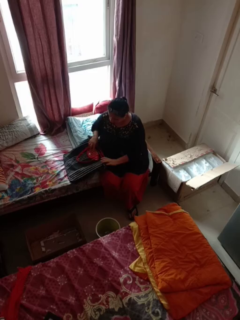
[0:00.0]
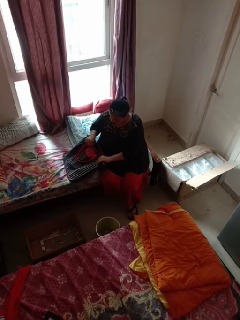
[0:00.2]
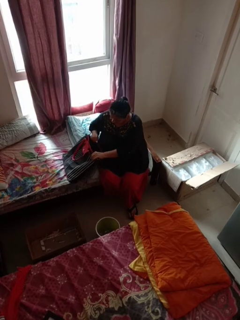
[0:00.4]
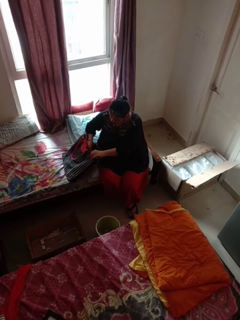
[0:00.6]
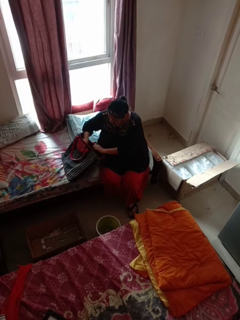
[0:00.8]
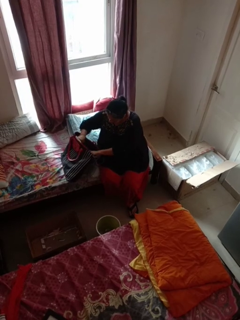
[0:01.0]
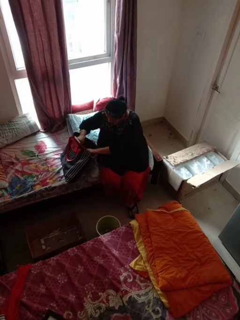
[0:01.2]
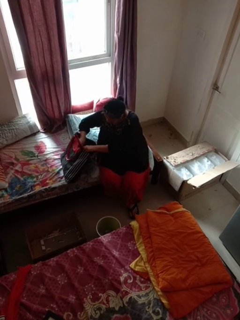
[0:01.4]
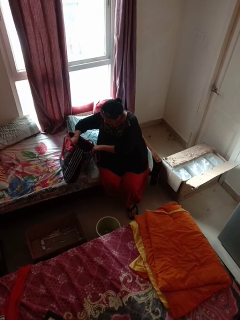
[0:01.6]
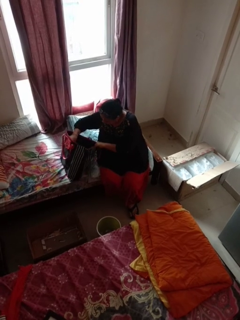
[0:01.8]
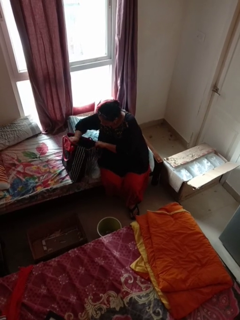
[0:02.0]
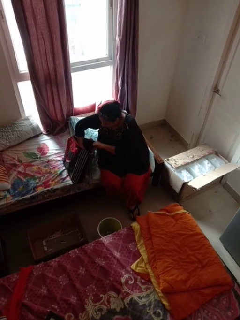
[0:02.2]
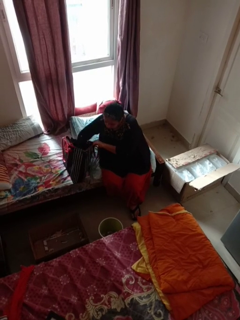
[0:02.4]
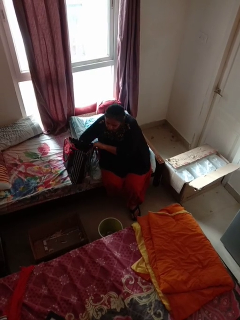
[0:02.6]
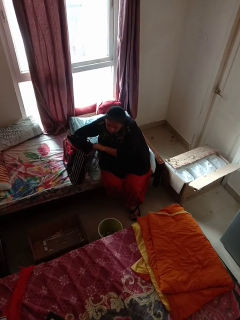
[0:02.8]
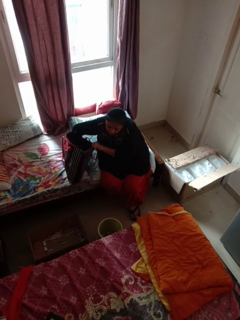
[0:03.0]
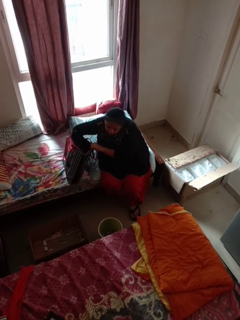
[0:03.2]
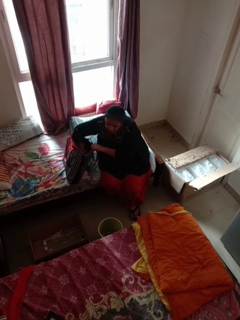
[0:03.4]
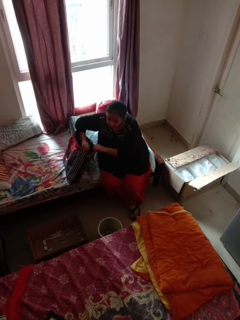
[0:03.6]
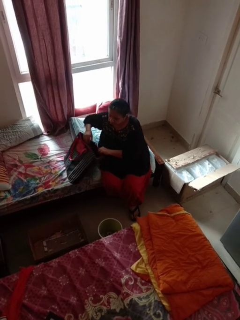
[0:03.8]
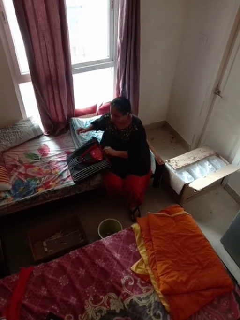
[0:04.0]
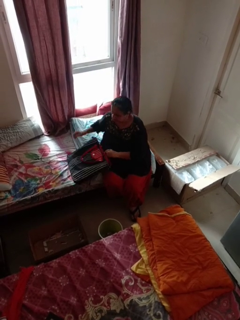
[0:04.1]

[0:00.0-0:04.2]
person searches in bag

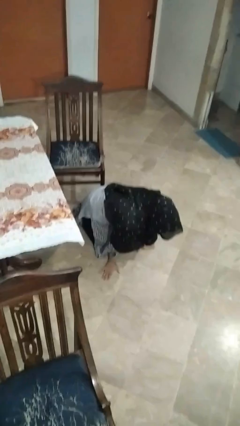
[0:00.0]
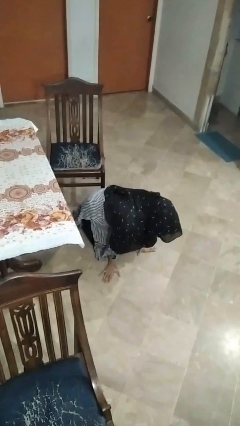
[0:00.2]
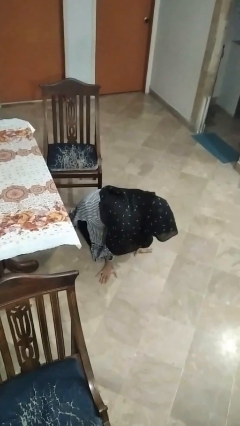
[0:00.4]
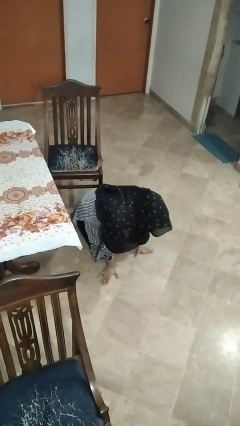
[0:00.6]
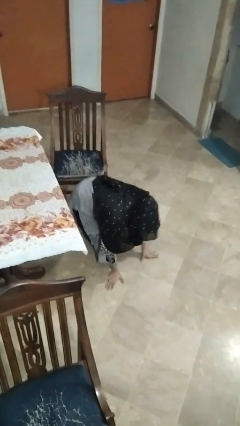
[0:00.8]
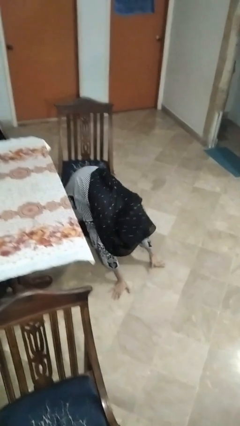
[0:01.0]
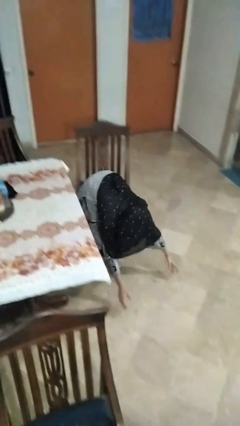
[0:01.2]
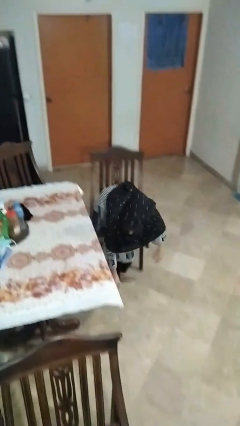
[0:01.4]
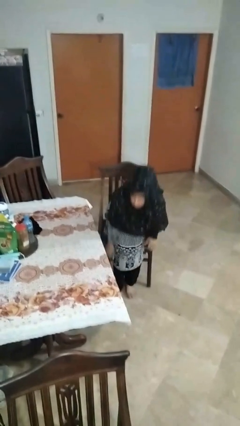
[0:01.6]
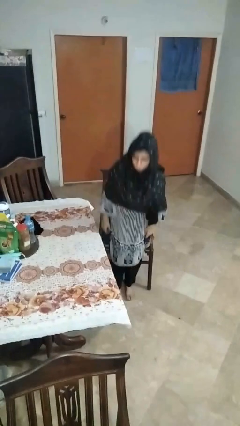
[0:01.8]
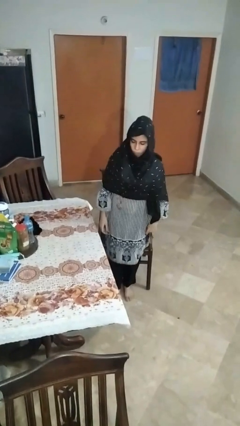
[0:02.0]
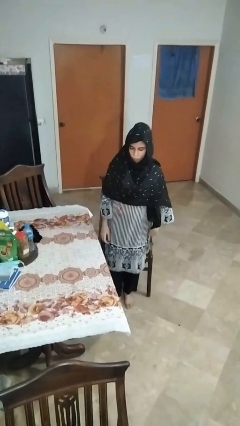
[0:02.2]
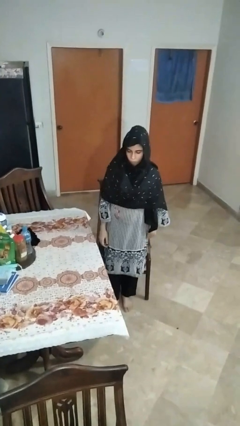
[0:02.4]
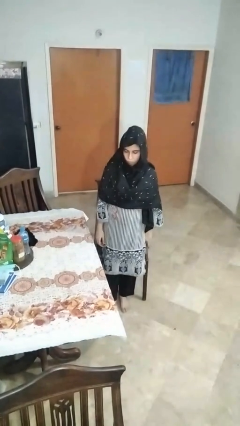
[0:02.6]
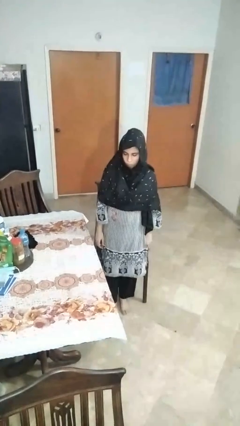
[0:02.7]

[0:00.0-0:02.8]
person stands up from floor

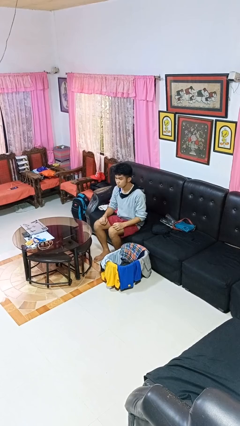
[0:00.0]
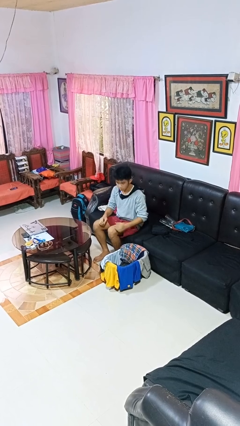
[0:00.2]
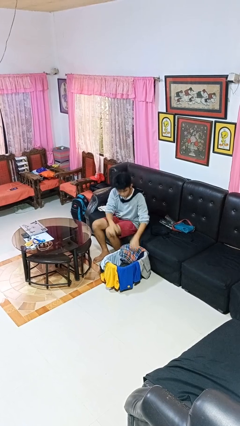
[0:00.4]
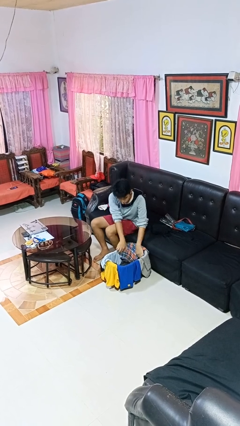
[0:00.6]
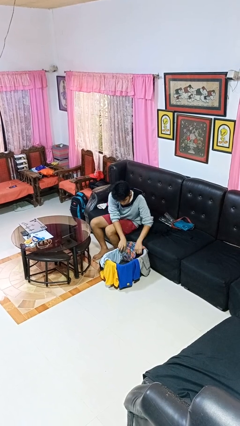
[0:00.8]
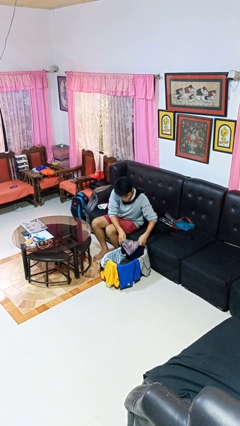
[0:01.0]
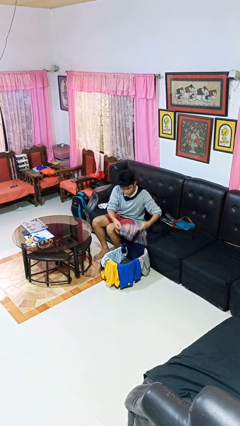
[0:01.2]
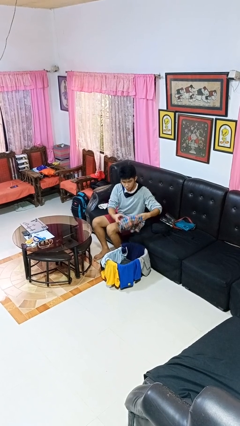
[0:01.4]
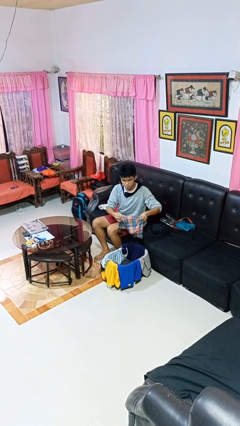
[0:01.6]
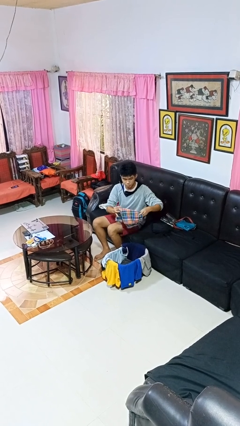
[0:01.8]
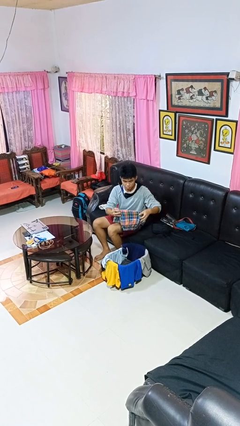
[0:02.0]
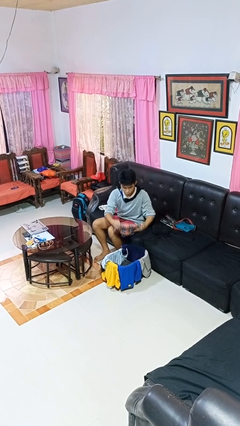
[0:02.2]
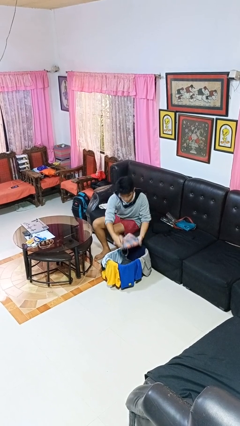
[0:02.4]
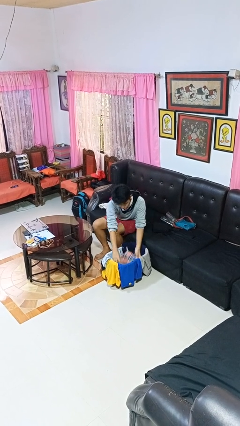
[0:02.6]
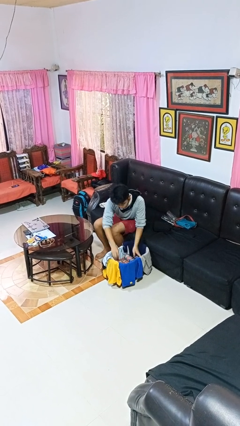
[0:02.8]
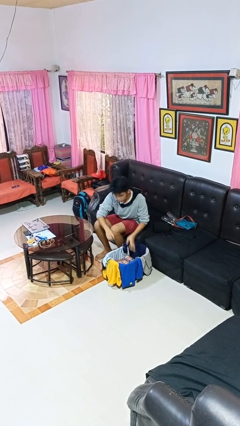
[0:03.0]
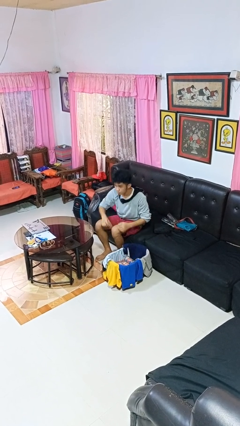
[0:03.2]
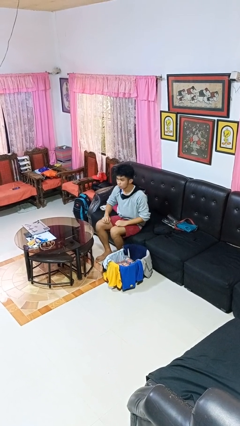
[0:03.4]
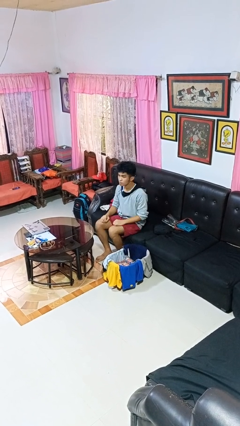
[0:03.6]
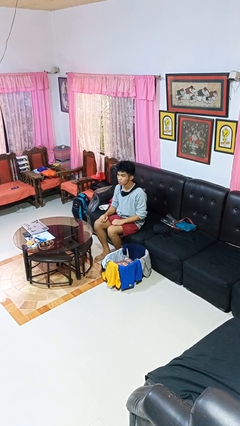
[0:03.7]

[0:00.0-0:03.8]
person folds pants

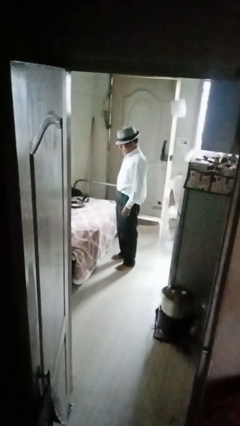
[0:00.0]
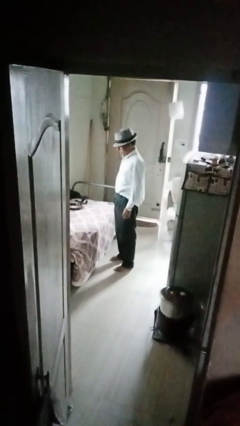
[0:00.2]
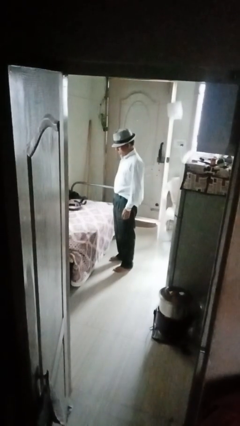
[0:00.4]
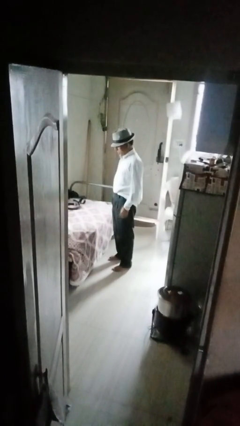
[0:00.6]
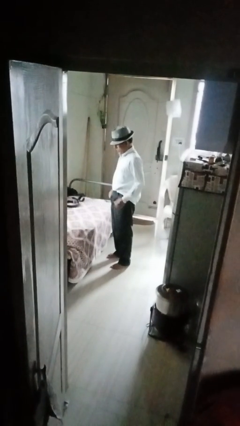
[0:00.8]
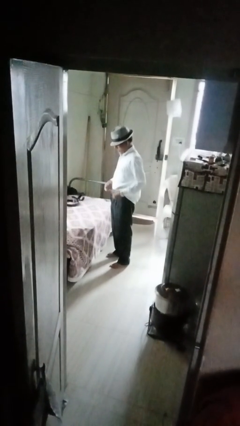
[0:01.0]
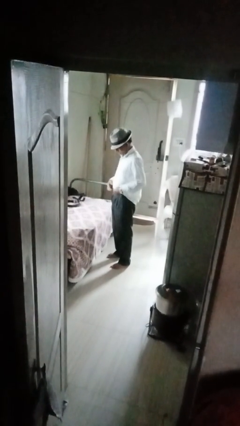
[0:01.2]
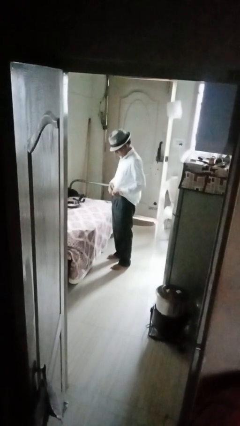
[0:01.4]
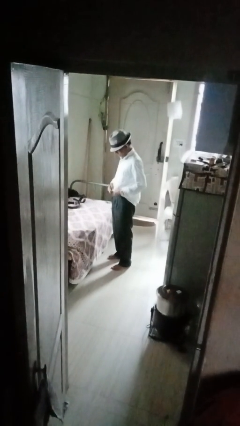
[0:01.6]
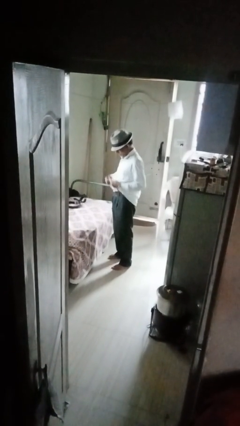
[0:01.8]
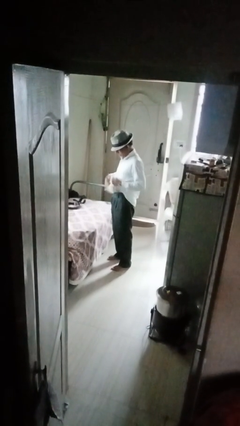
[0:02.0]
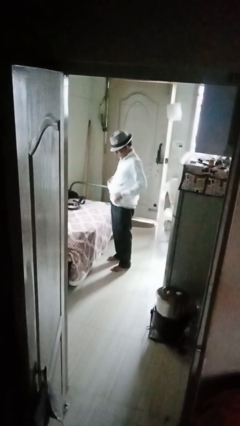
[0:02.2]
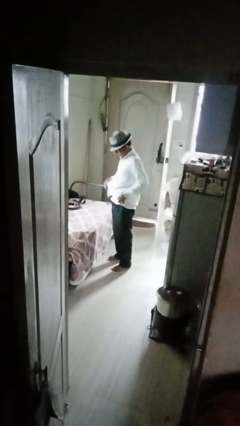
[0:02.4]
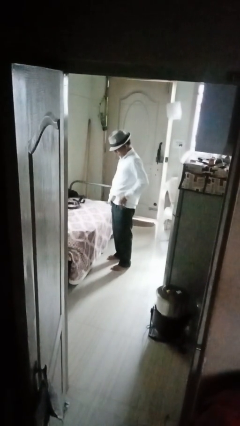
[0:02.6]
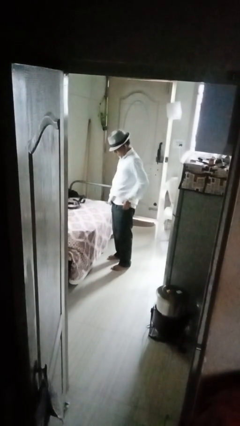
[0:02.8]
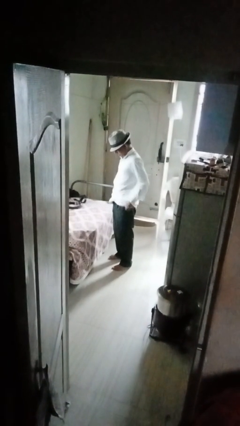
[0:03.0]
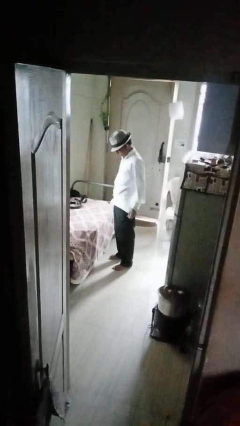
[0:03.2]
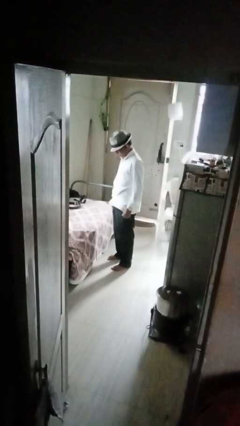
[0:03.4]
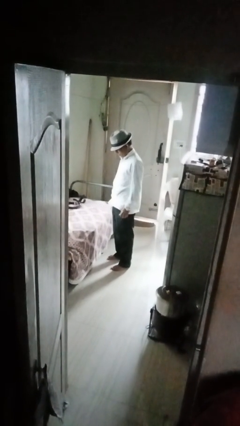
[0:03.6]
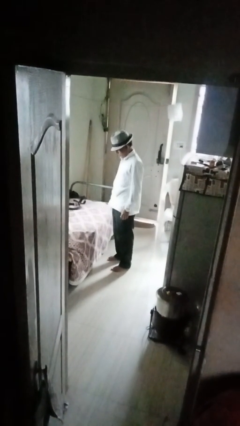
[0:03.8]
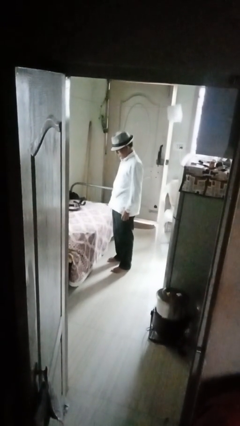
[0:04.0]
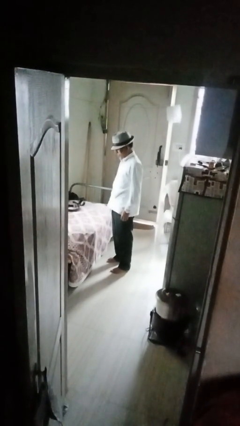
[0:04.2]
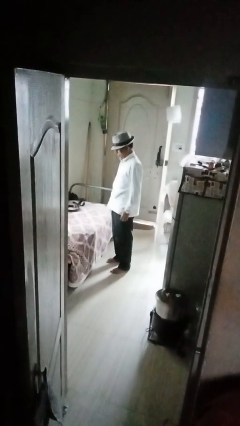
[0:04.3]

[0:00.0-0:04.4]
person untucks shirt

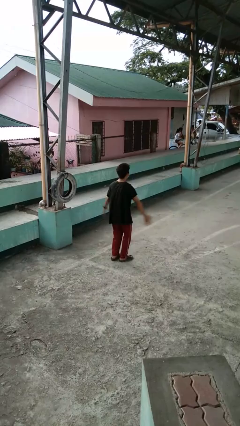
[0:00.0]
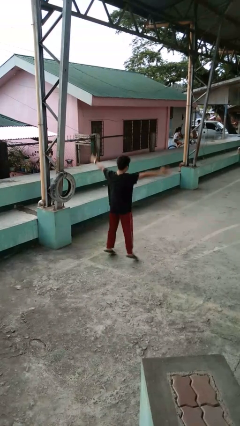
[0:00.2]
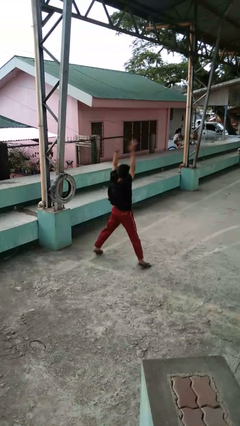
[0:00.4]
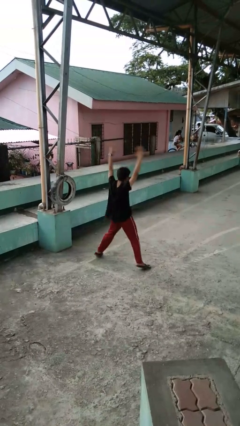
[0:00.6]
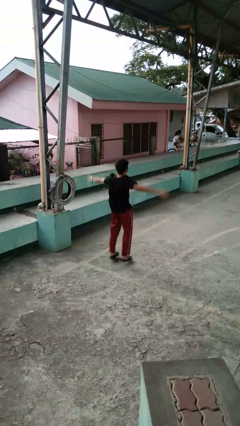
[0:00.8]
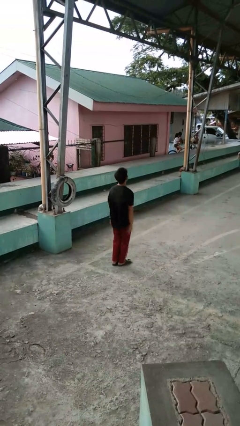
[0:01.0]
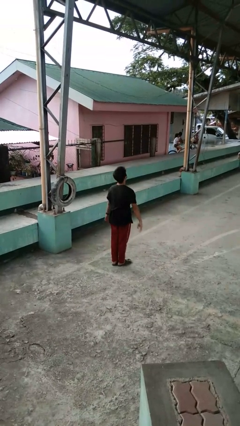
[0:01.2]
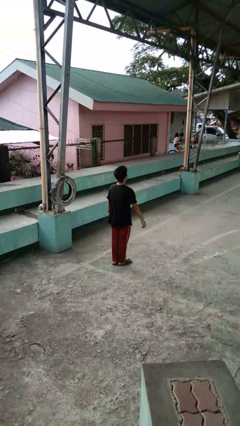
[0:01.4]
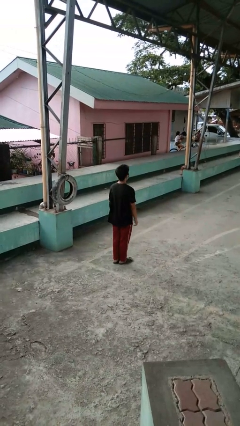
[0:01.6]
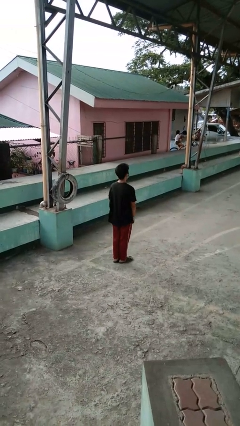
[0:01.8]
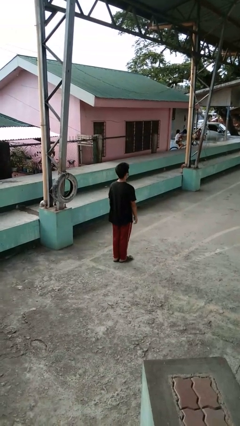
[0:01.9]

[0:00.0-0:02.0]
person exercises with jumping jacks

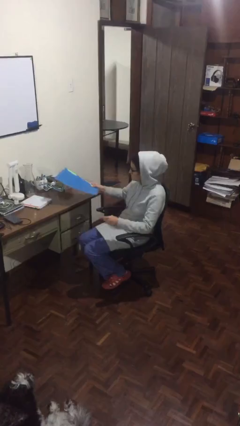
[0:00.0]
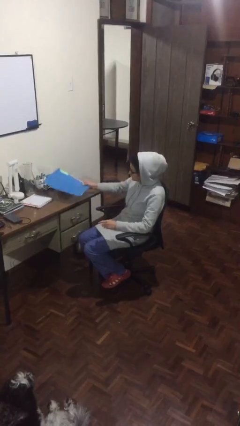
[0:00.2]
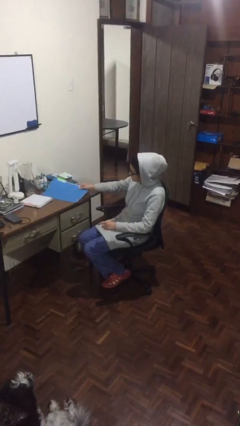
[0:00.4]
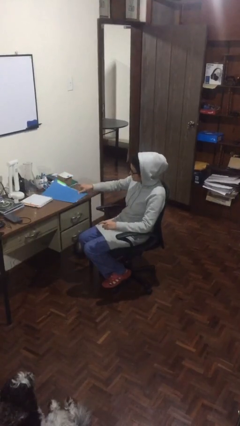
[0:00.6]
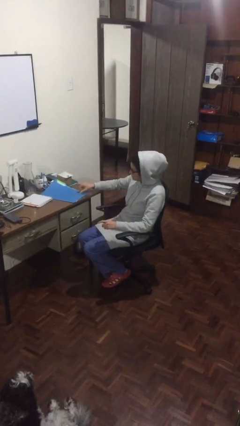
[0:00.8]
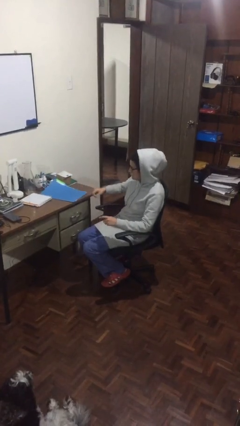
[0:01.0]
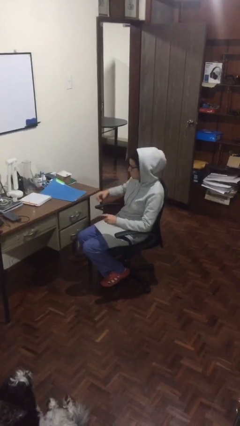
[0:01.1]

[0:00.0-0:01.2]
person puts down object on table
